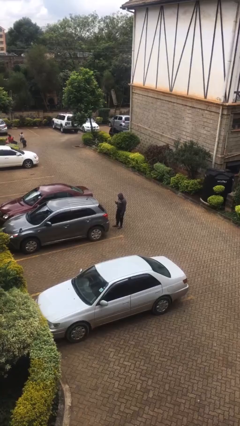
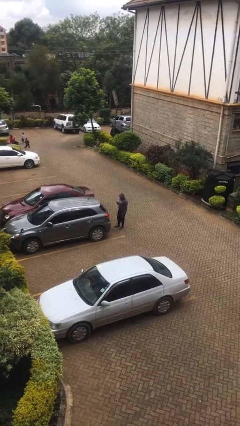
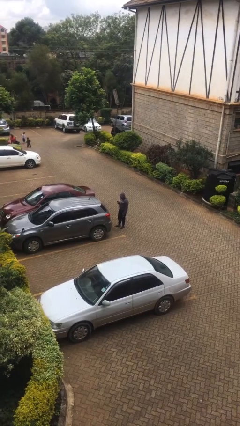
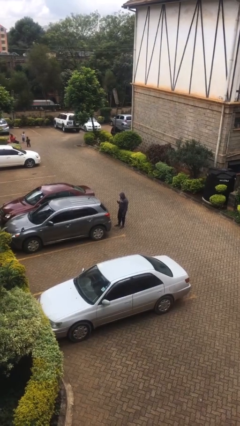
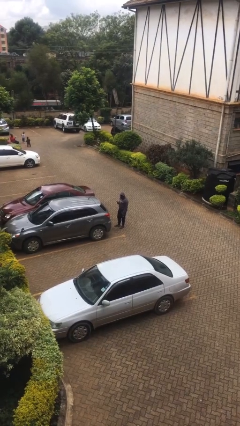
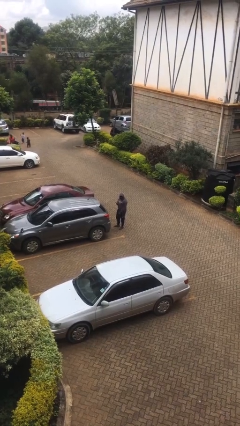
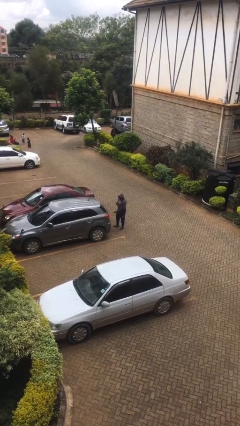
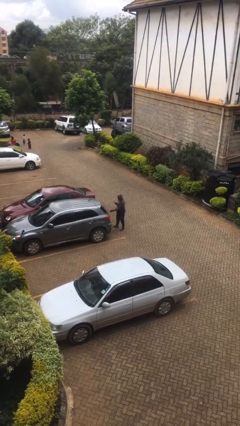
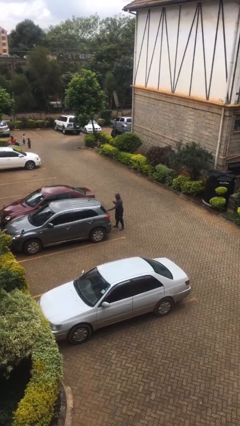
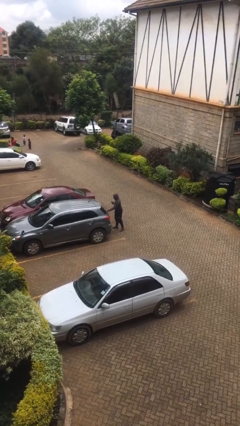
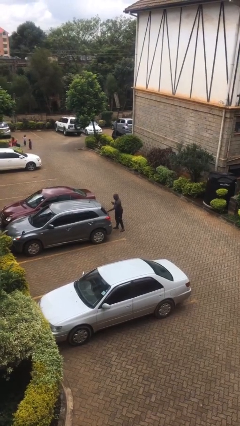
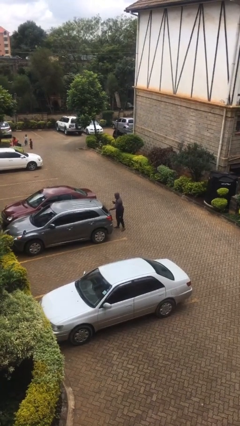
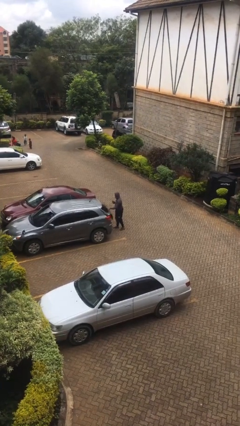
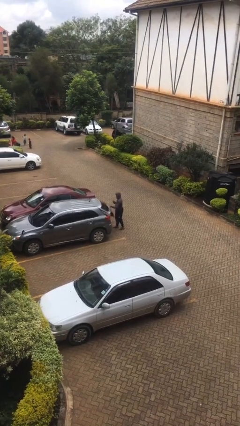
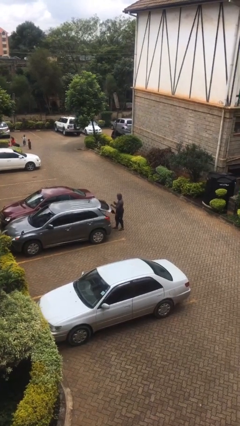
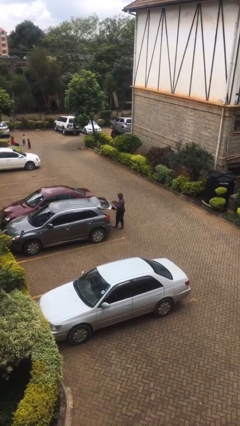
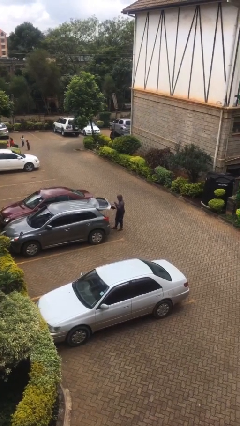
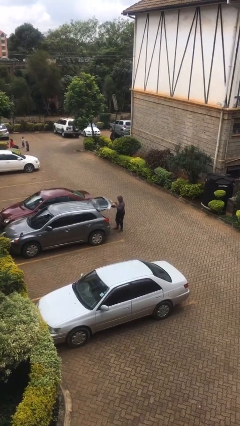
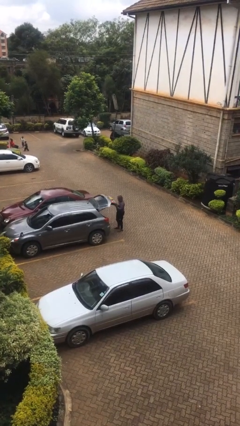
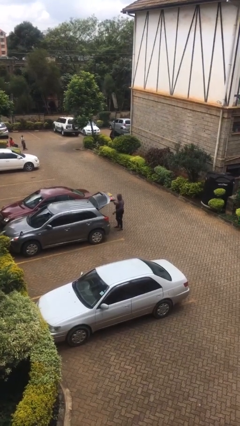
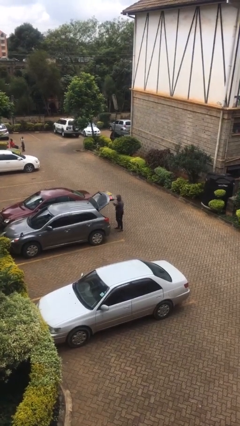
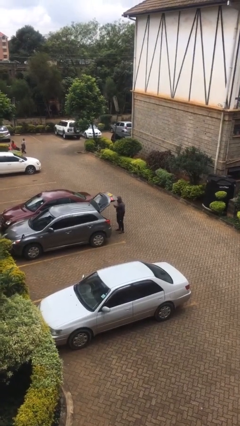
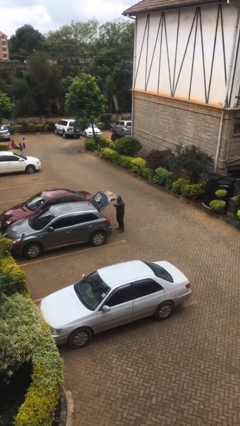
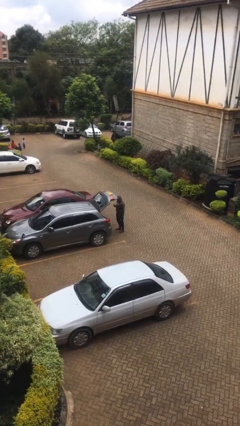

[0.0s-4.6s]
person opens car trunk

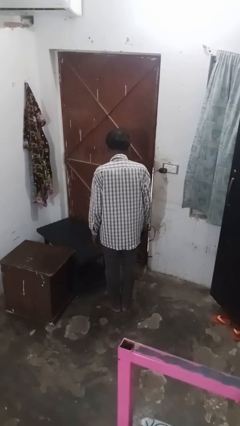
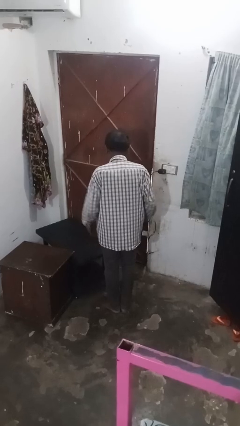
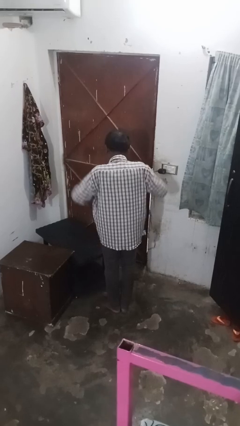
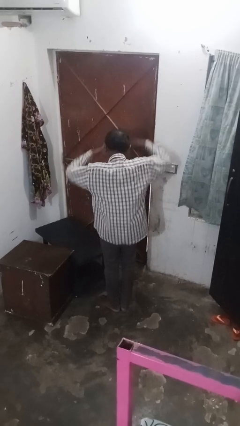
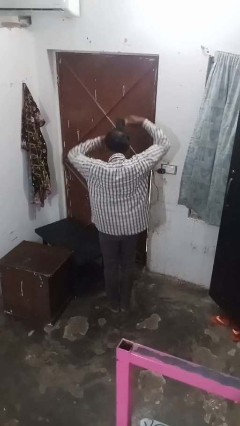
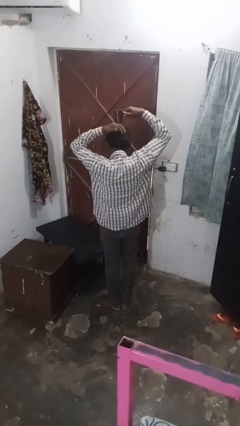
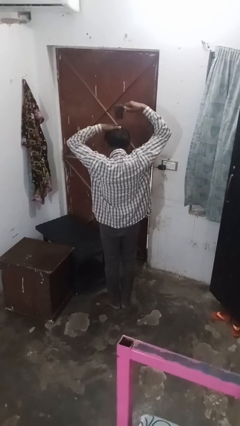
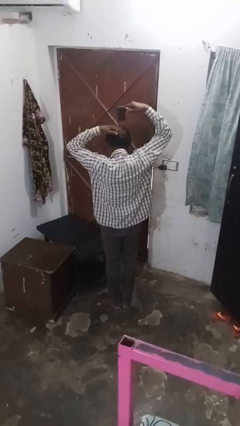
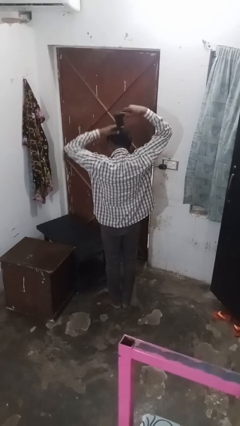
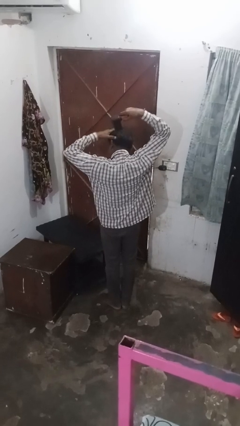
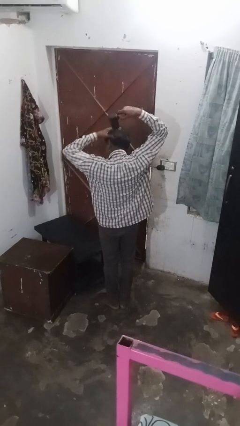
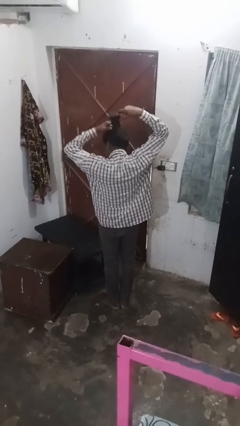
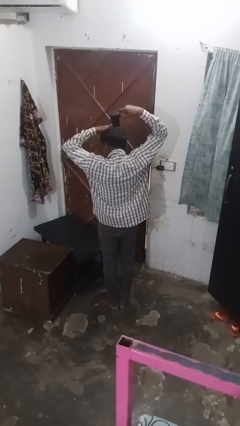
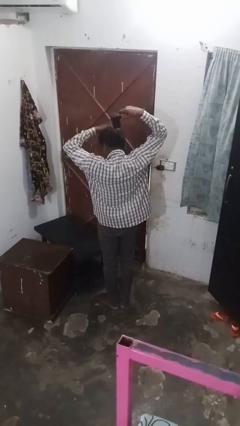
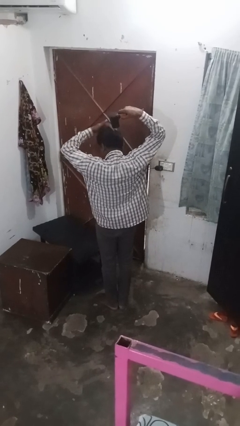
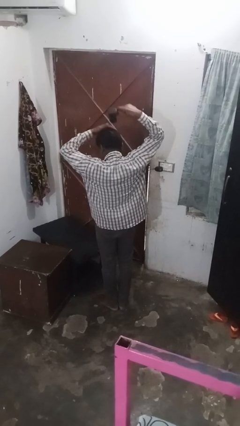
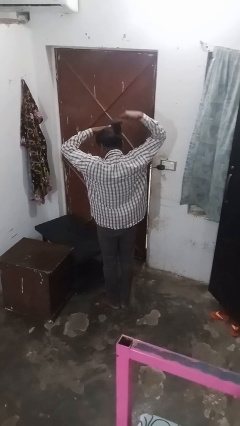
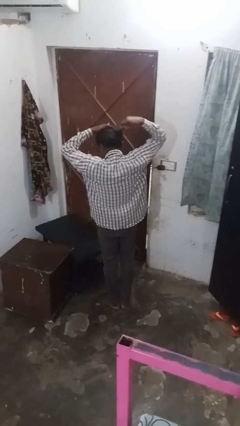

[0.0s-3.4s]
person dries hair with towel

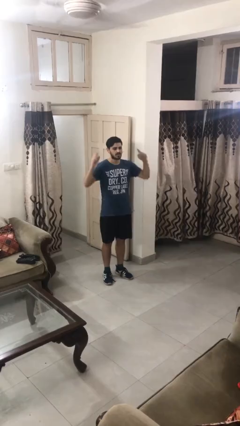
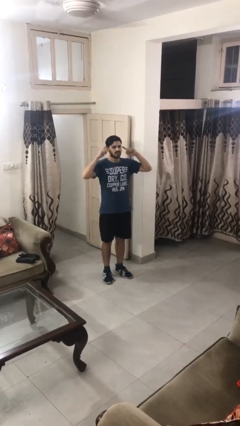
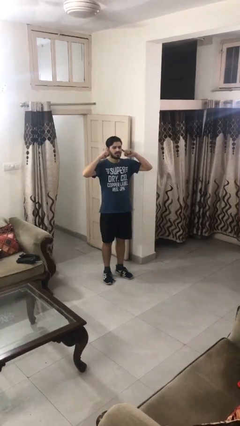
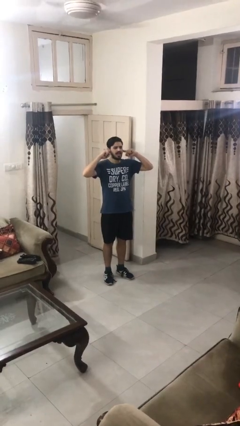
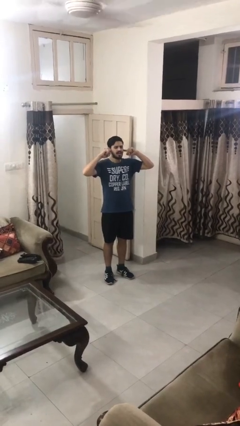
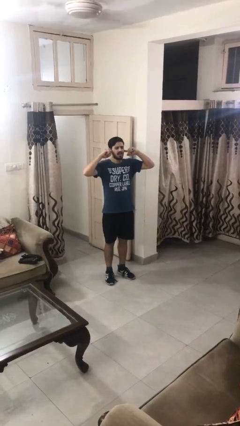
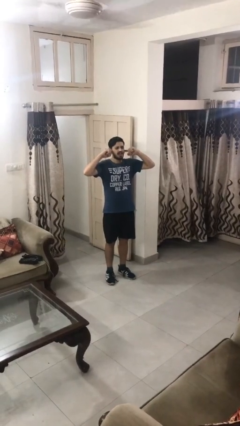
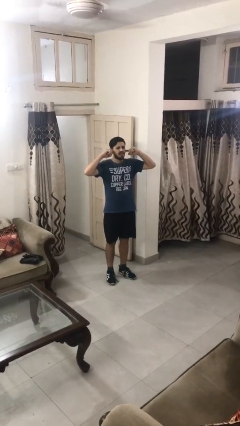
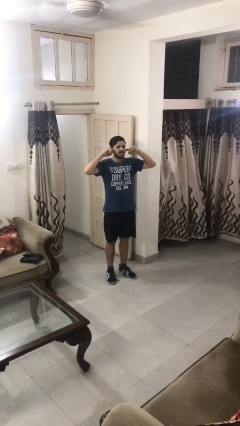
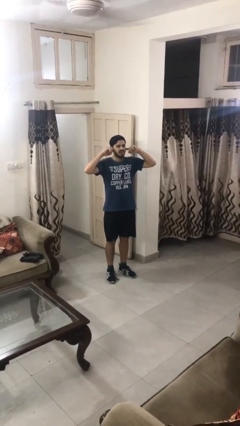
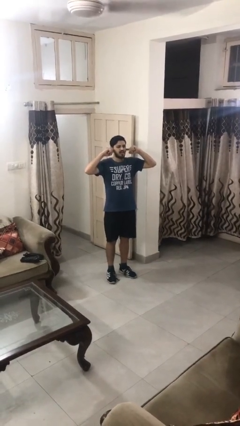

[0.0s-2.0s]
person puts fingers in ear

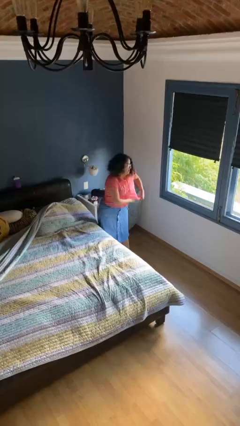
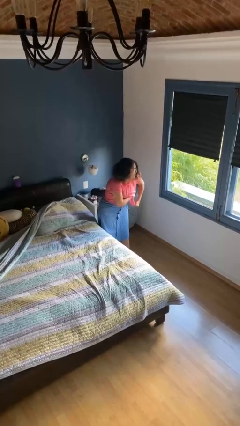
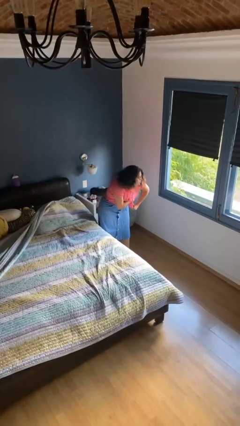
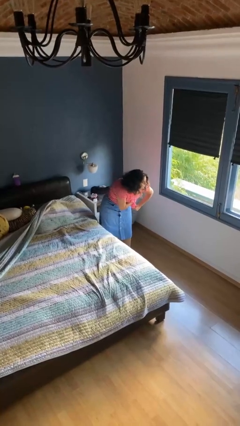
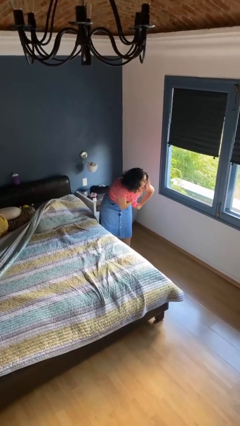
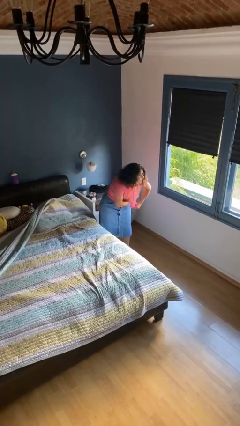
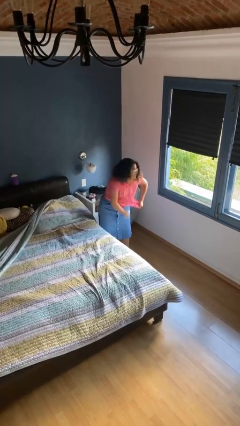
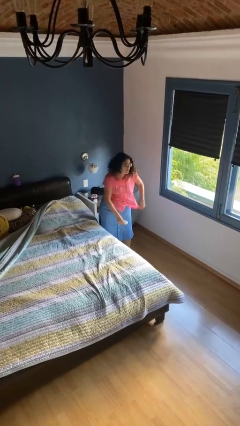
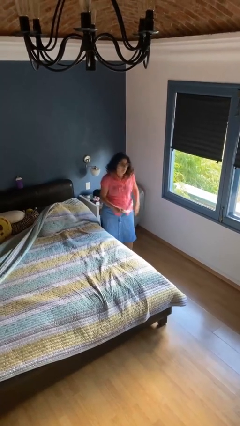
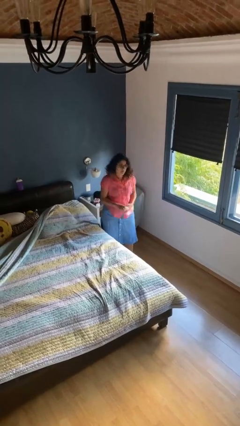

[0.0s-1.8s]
person applies deodorant

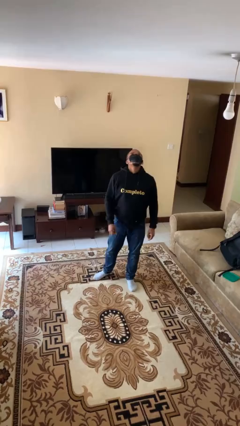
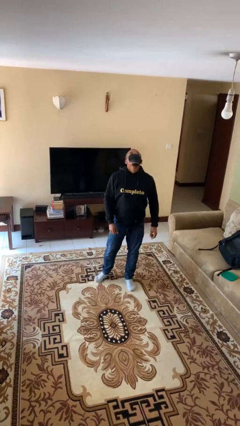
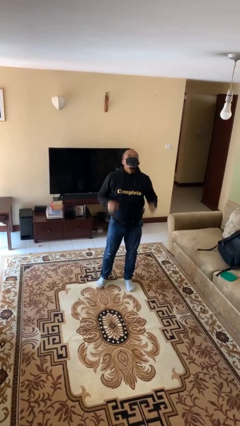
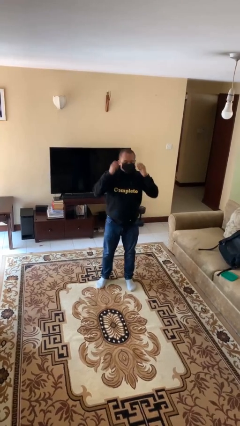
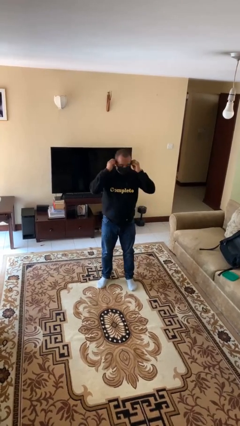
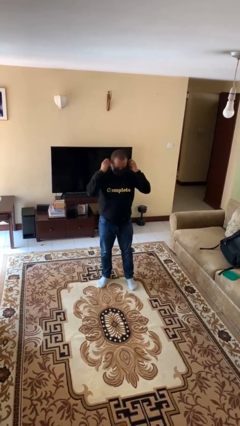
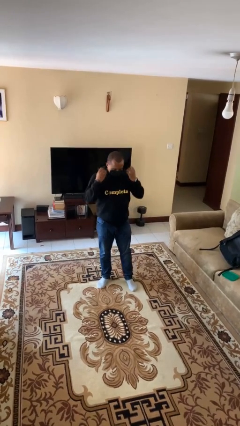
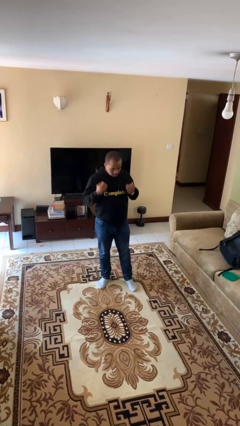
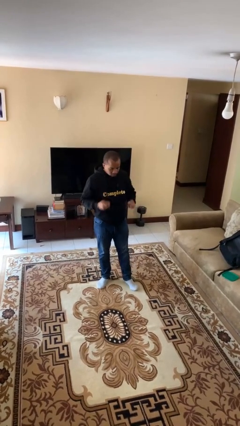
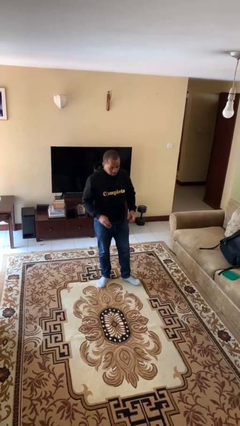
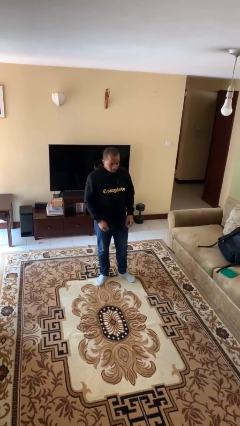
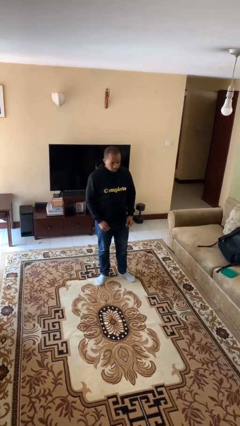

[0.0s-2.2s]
person takes off facemask

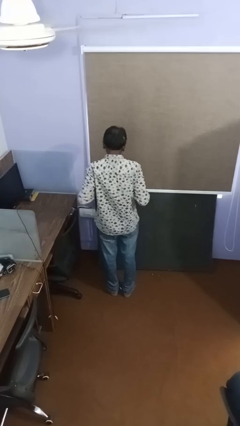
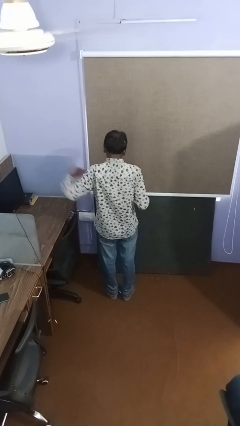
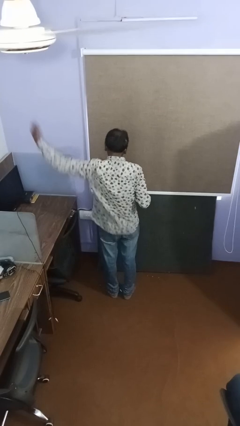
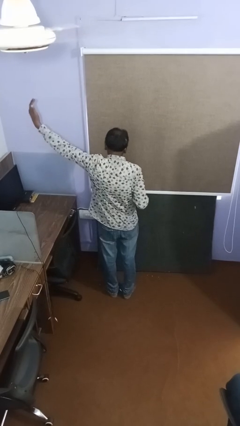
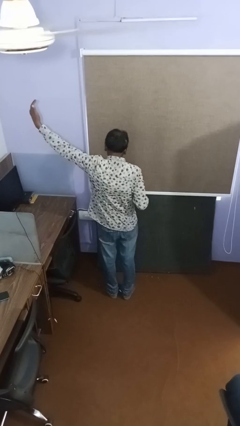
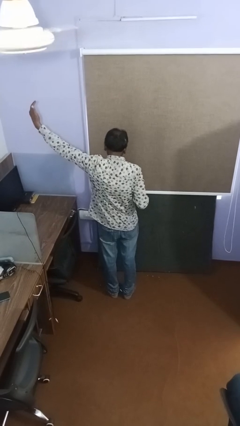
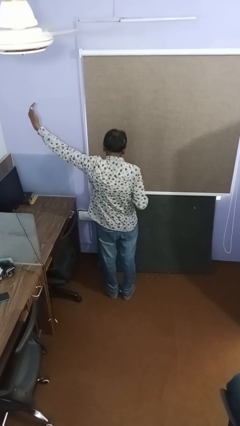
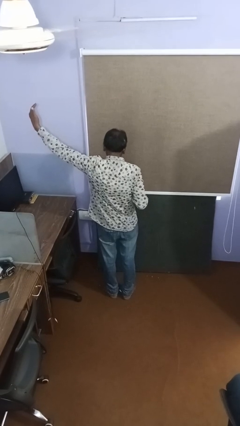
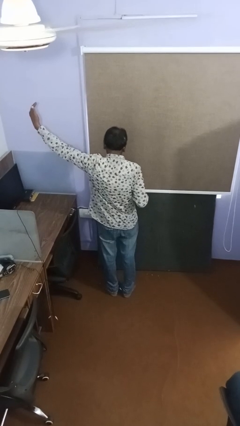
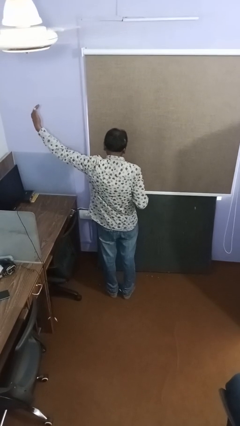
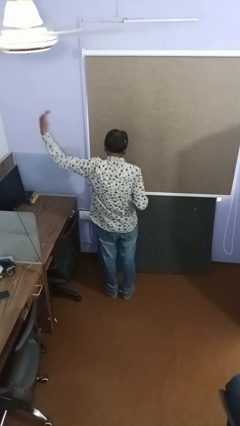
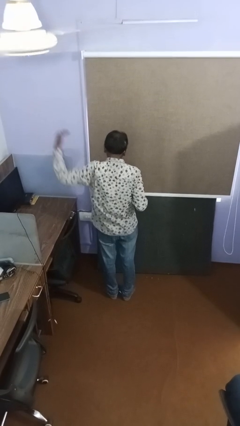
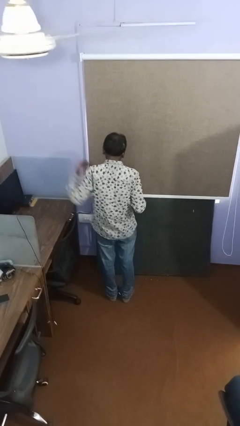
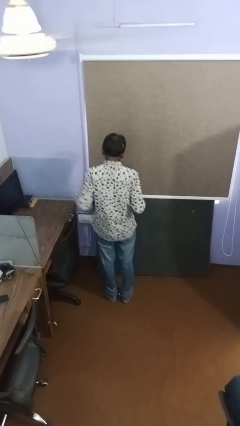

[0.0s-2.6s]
person gestures swipe left

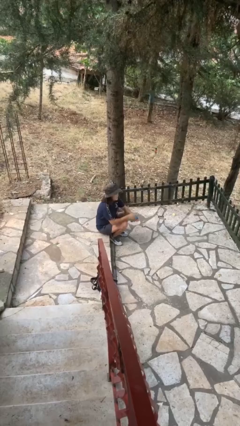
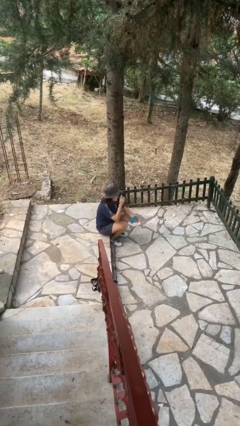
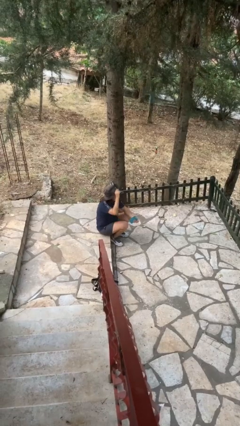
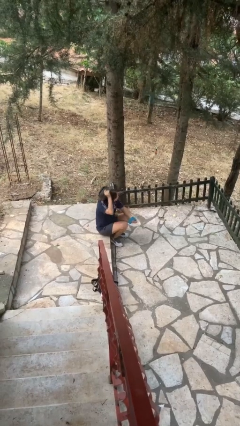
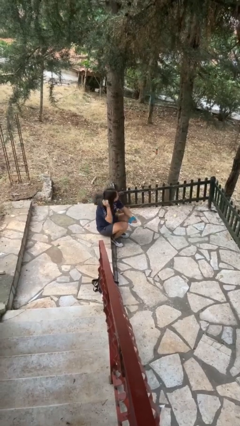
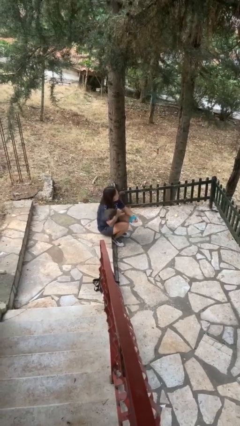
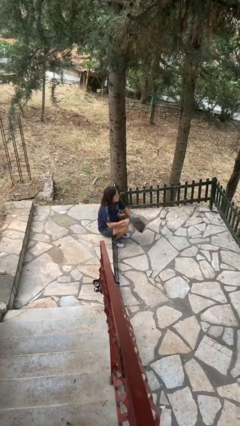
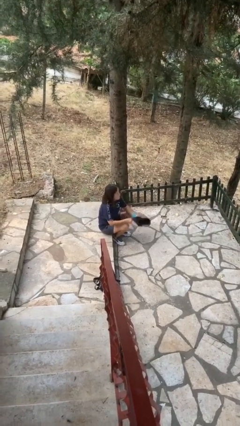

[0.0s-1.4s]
person takes off hat
